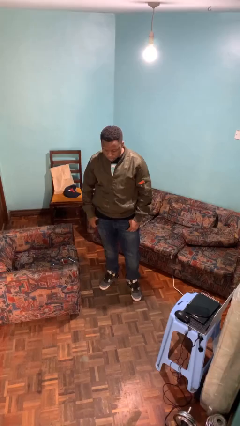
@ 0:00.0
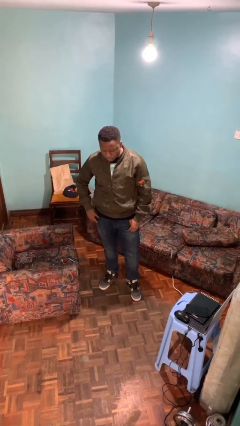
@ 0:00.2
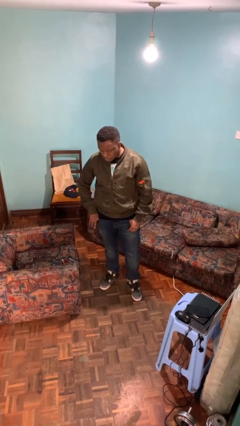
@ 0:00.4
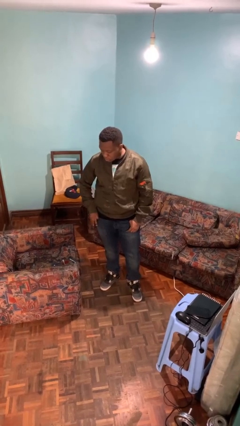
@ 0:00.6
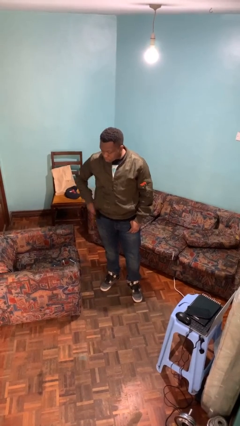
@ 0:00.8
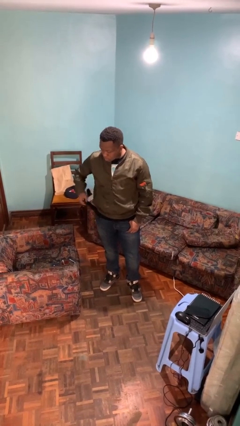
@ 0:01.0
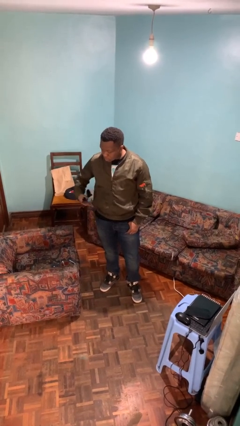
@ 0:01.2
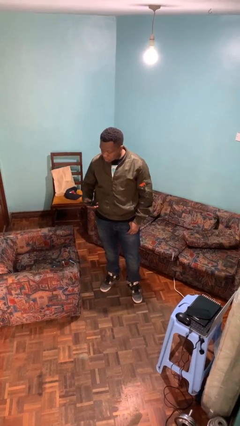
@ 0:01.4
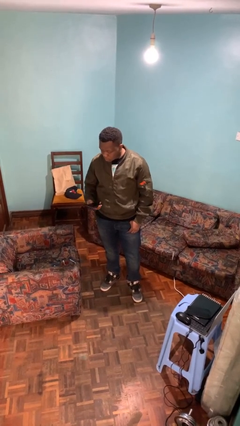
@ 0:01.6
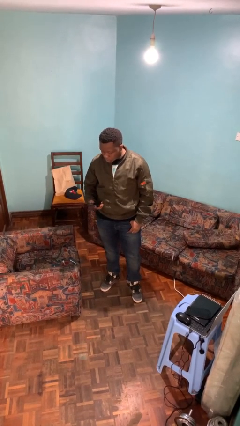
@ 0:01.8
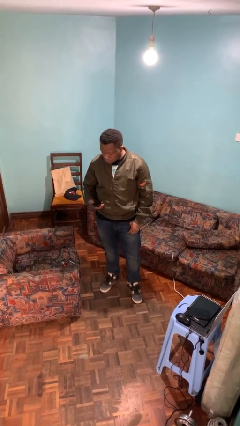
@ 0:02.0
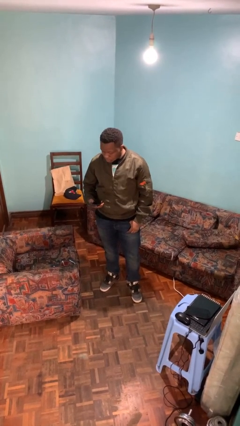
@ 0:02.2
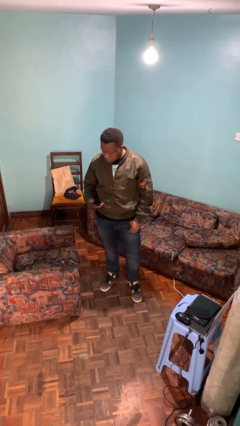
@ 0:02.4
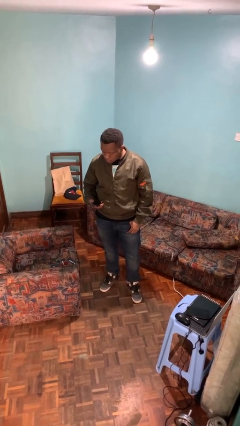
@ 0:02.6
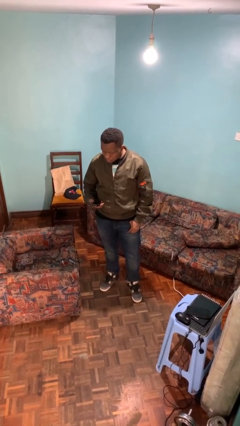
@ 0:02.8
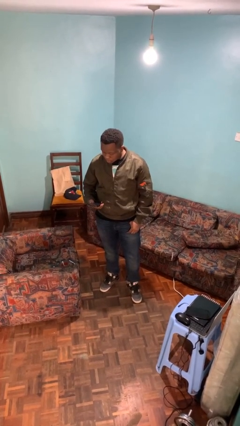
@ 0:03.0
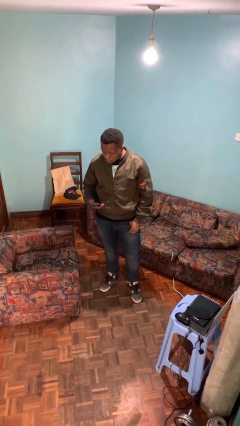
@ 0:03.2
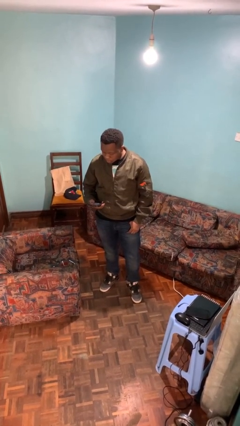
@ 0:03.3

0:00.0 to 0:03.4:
person takes phone from pocket

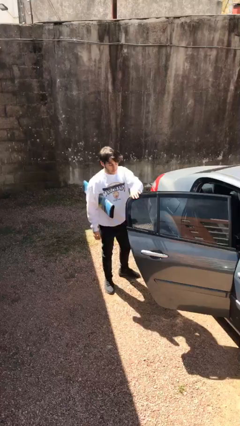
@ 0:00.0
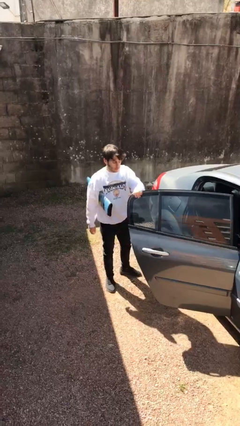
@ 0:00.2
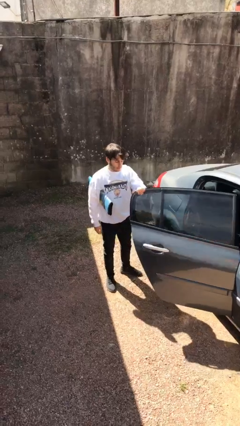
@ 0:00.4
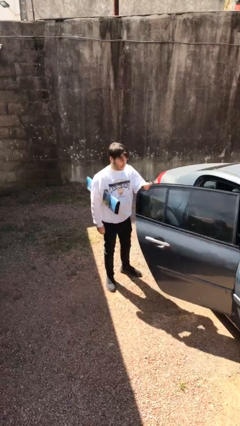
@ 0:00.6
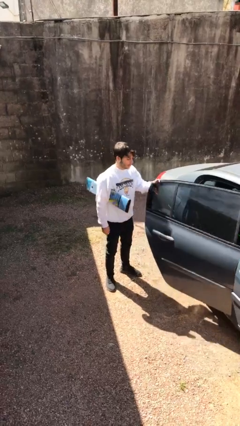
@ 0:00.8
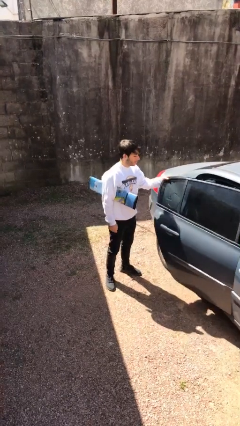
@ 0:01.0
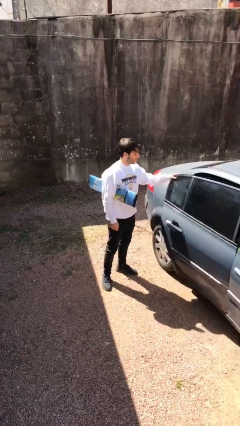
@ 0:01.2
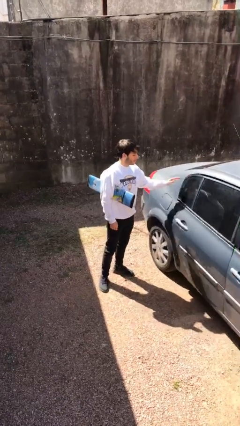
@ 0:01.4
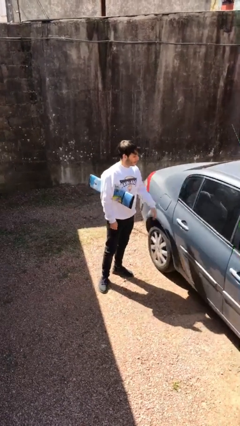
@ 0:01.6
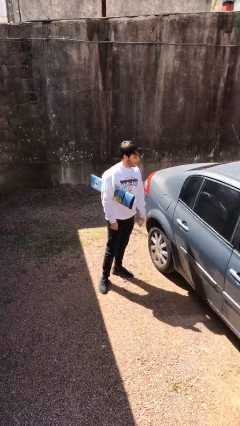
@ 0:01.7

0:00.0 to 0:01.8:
person closes car door

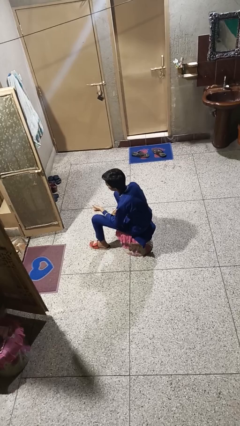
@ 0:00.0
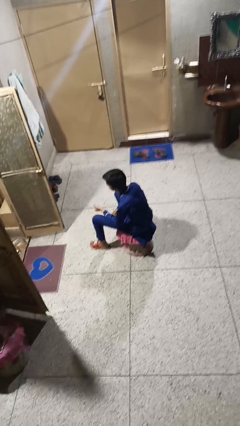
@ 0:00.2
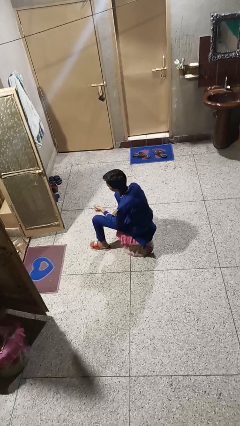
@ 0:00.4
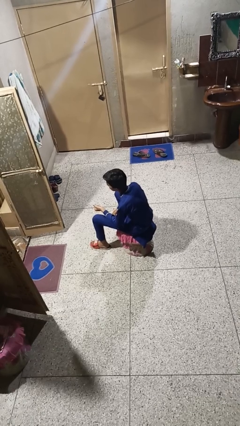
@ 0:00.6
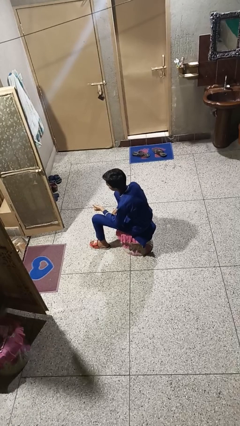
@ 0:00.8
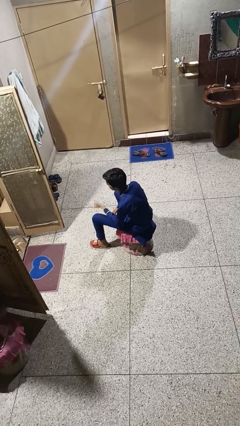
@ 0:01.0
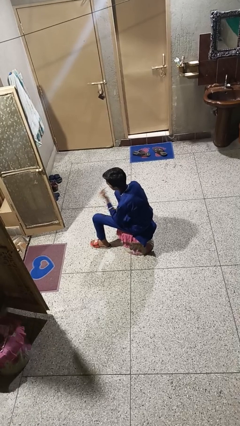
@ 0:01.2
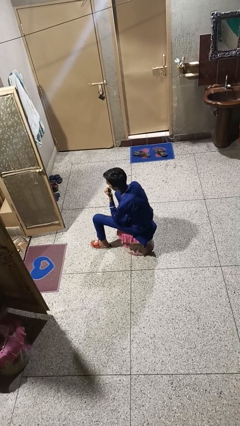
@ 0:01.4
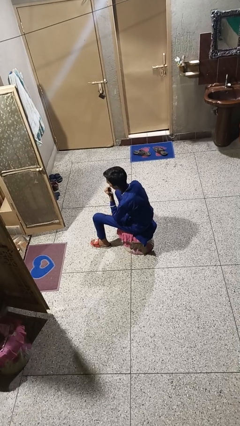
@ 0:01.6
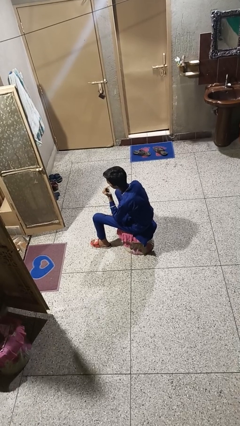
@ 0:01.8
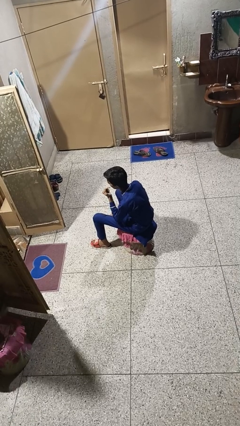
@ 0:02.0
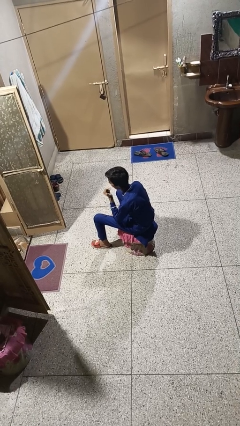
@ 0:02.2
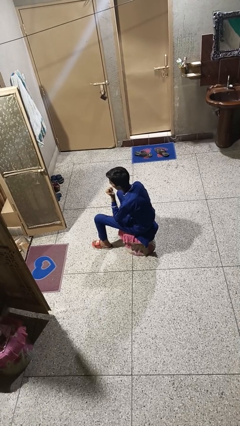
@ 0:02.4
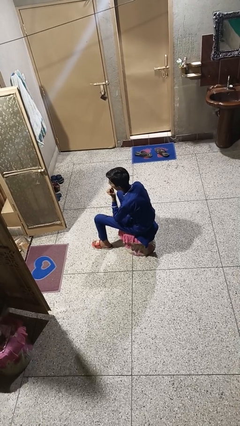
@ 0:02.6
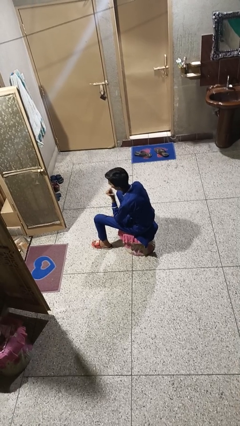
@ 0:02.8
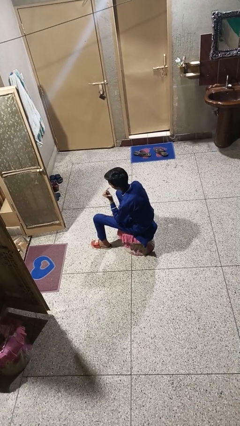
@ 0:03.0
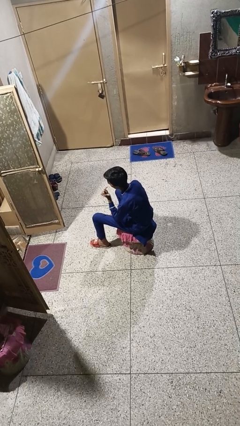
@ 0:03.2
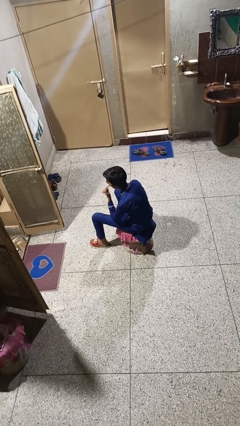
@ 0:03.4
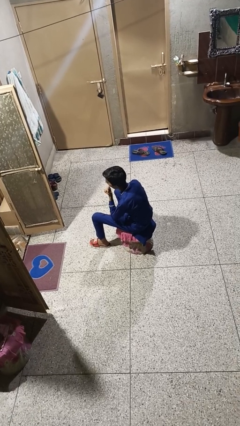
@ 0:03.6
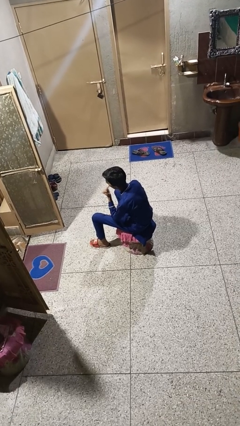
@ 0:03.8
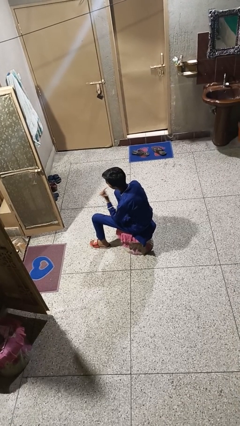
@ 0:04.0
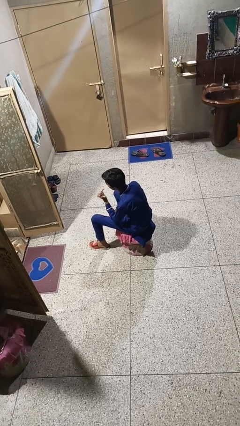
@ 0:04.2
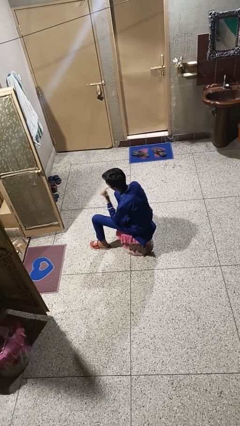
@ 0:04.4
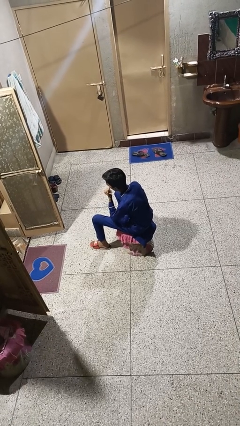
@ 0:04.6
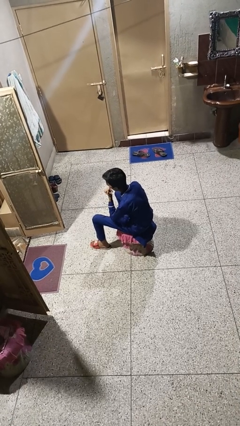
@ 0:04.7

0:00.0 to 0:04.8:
person licks fingers

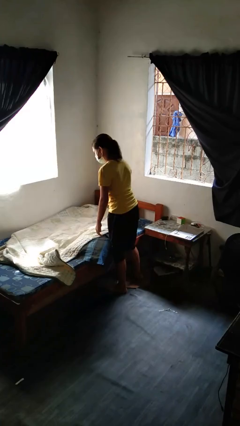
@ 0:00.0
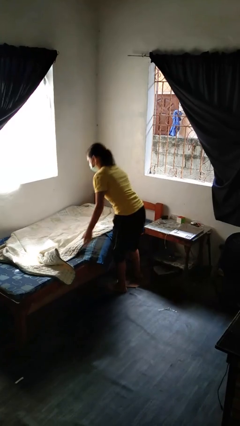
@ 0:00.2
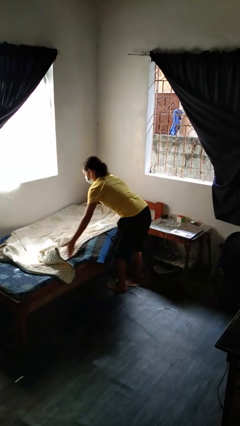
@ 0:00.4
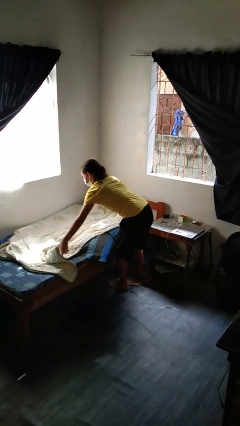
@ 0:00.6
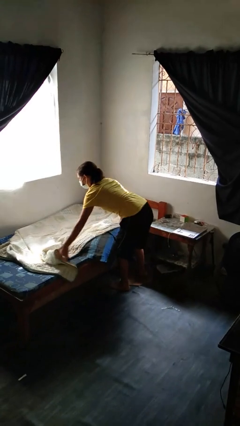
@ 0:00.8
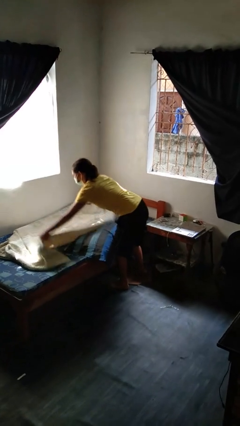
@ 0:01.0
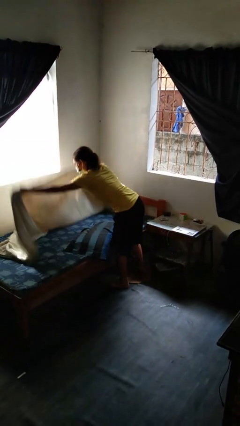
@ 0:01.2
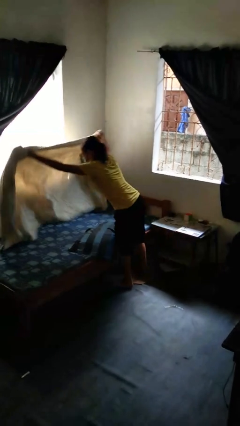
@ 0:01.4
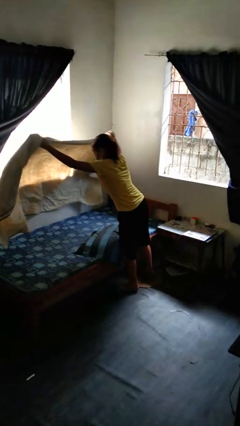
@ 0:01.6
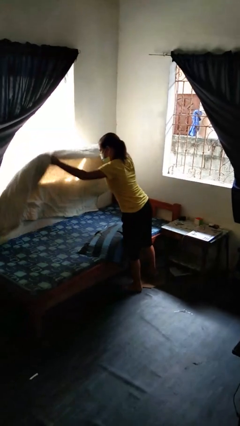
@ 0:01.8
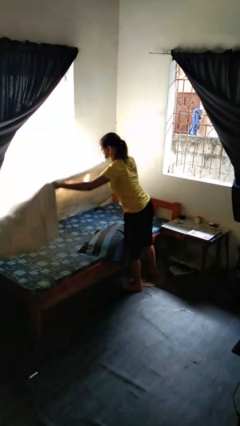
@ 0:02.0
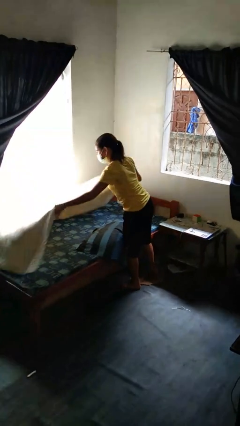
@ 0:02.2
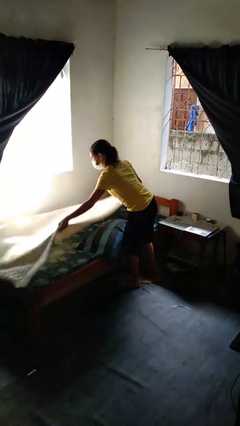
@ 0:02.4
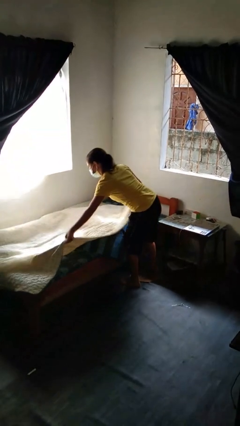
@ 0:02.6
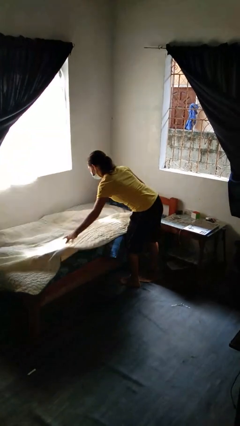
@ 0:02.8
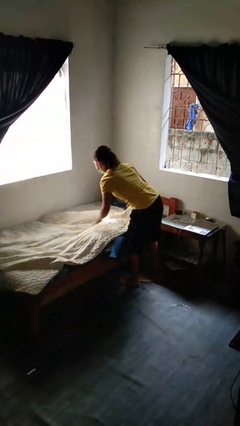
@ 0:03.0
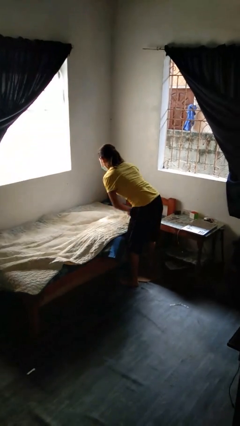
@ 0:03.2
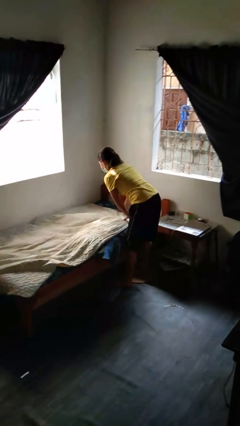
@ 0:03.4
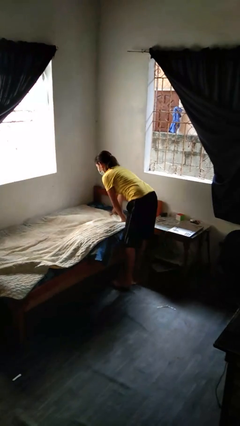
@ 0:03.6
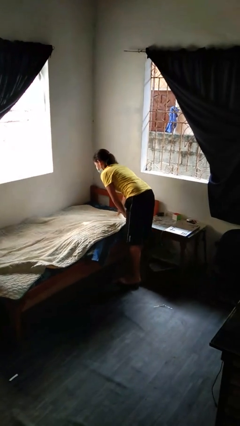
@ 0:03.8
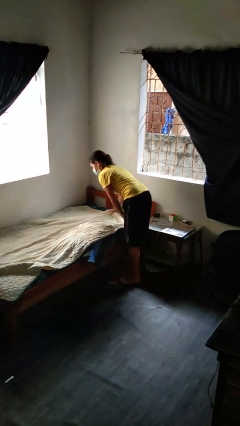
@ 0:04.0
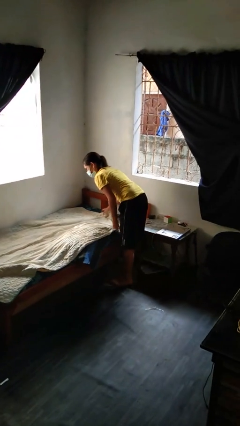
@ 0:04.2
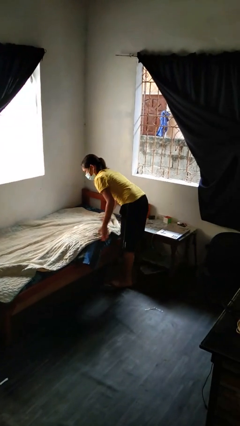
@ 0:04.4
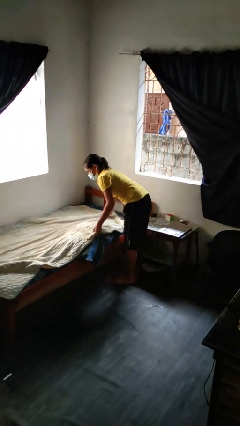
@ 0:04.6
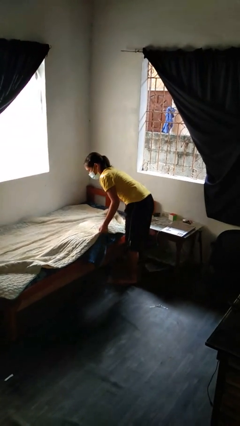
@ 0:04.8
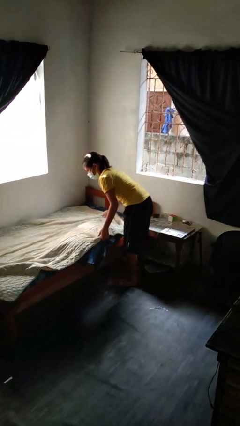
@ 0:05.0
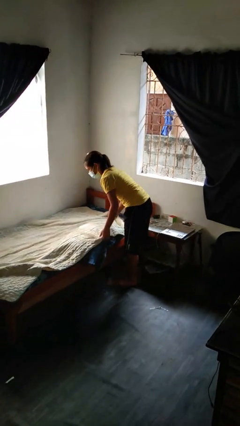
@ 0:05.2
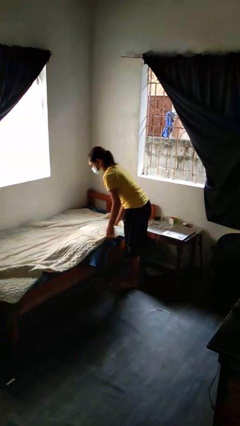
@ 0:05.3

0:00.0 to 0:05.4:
person makes bed

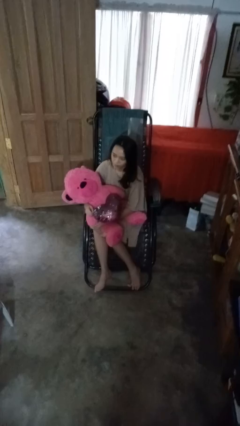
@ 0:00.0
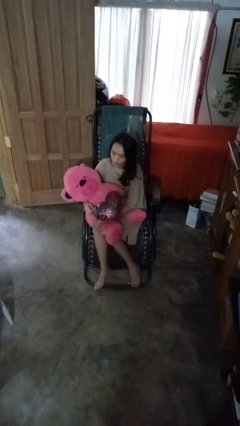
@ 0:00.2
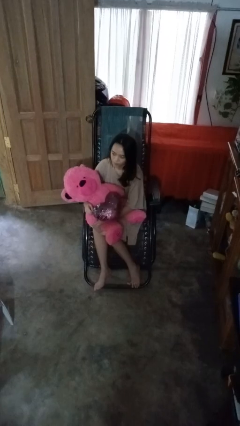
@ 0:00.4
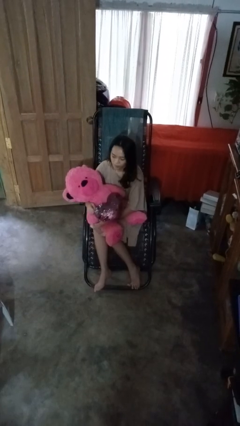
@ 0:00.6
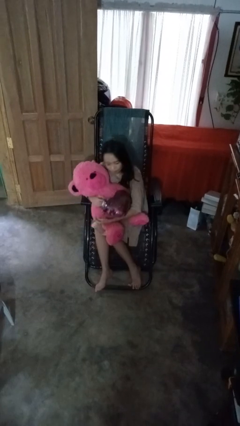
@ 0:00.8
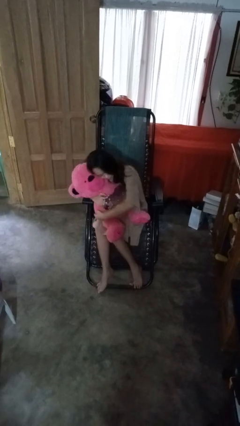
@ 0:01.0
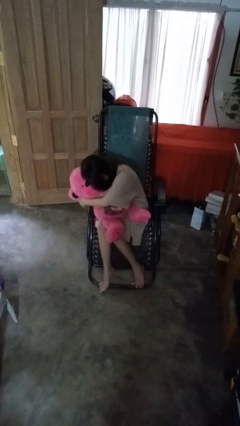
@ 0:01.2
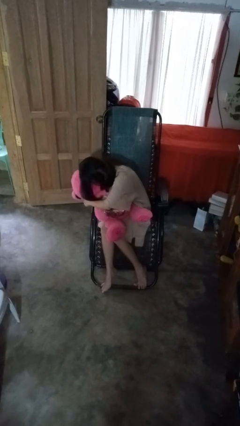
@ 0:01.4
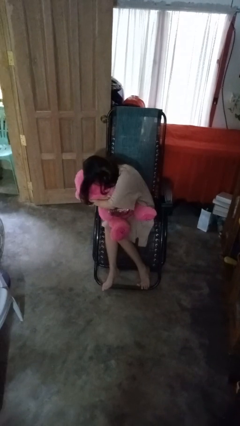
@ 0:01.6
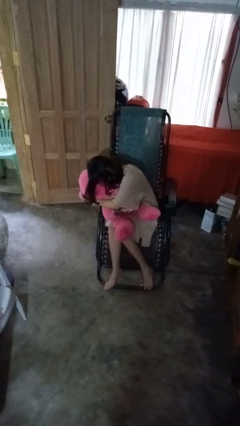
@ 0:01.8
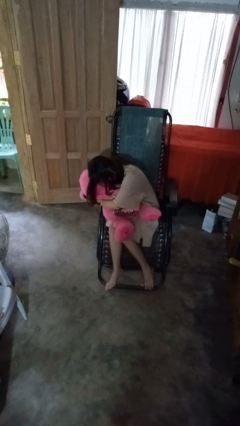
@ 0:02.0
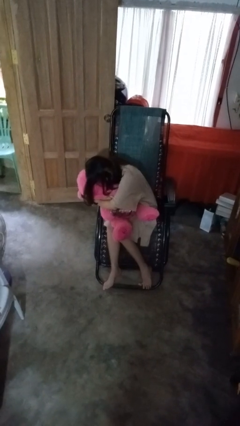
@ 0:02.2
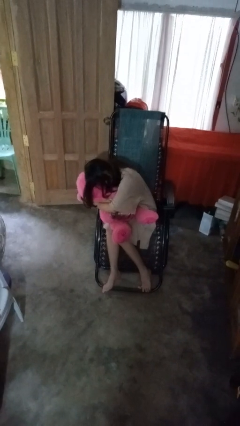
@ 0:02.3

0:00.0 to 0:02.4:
person hugs stuffed animal
